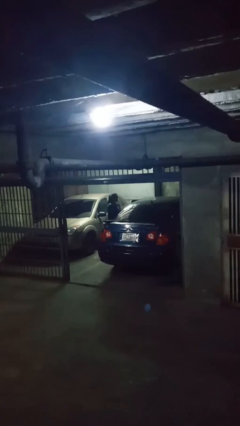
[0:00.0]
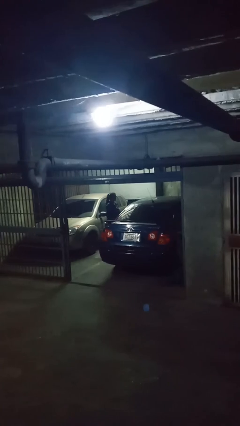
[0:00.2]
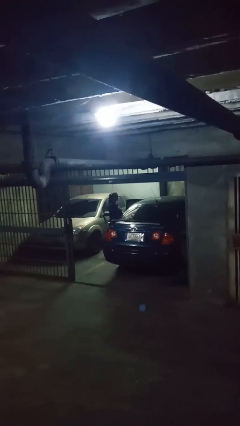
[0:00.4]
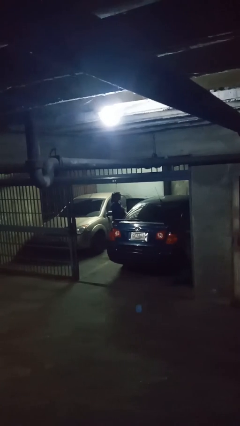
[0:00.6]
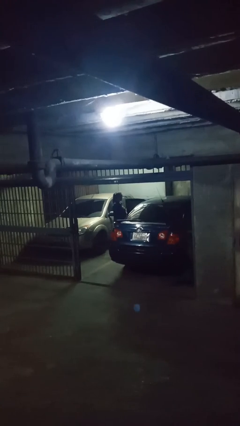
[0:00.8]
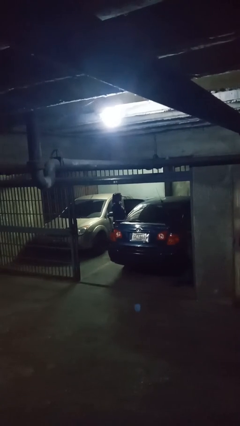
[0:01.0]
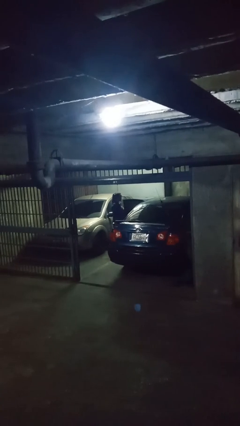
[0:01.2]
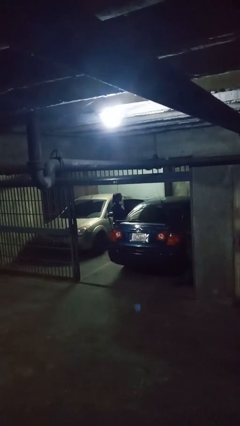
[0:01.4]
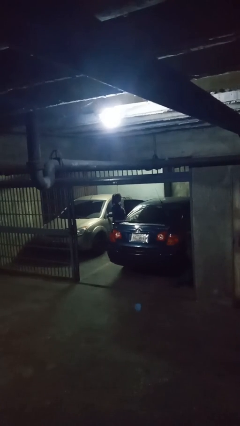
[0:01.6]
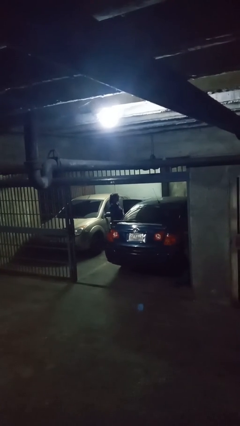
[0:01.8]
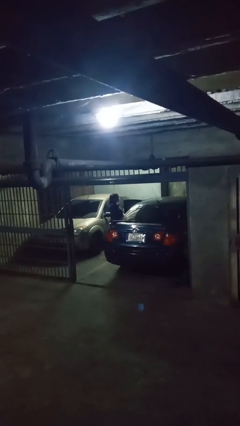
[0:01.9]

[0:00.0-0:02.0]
person opens car door

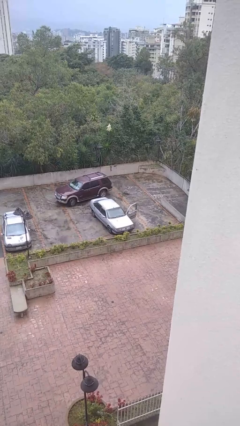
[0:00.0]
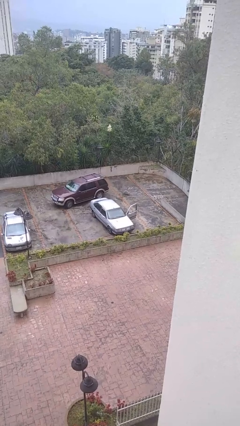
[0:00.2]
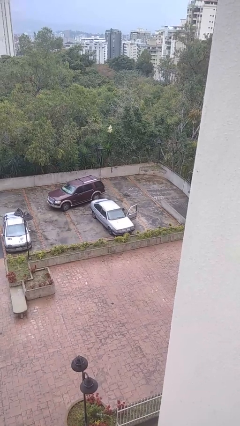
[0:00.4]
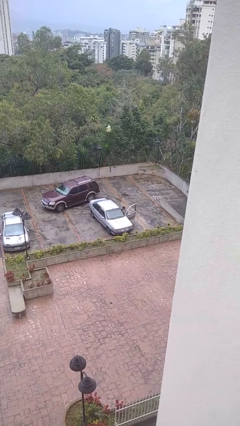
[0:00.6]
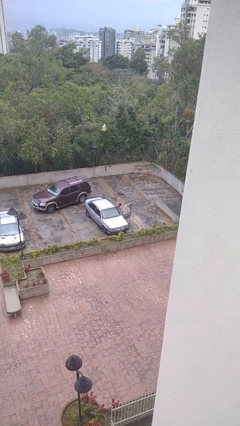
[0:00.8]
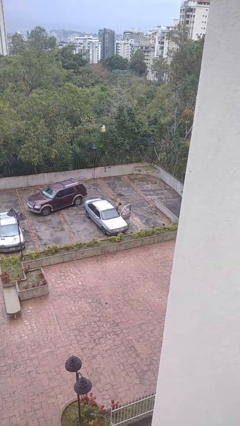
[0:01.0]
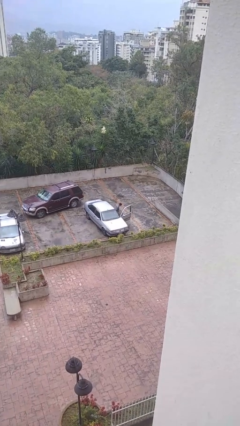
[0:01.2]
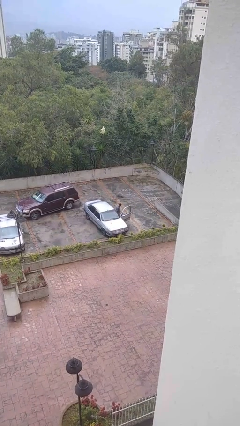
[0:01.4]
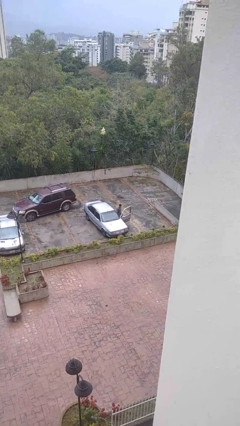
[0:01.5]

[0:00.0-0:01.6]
person exits car

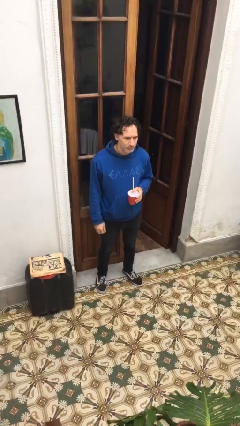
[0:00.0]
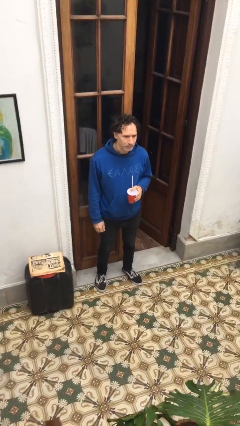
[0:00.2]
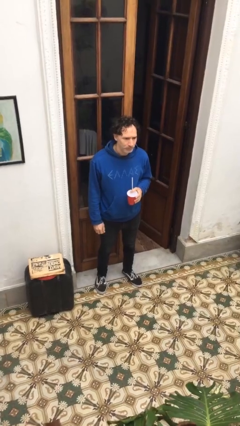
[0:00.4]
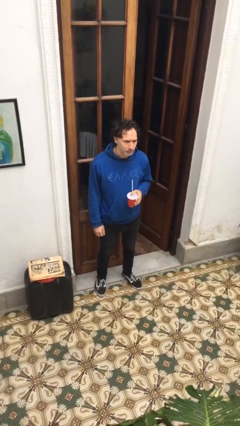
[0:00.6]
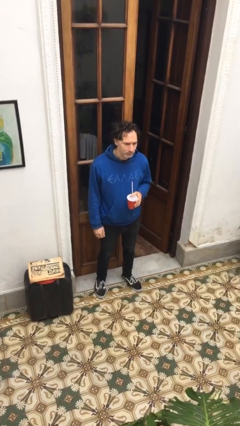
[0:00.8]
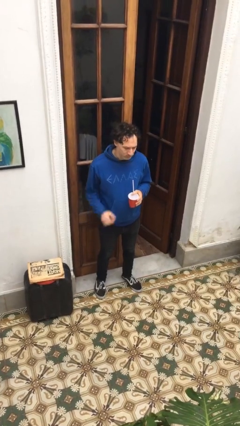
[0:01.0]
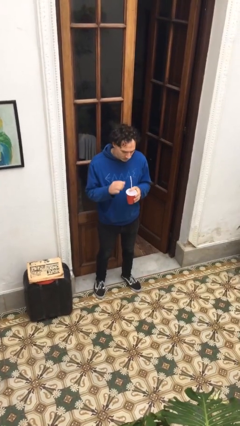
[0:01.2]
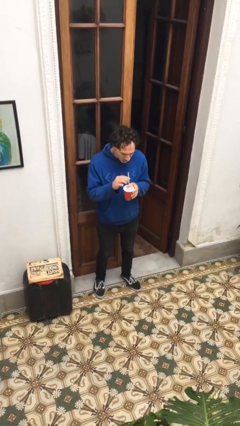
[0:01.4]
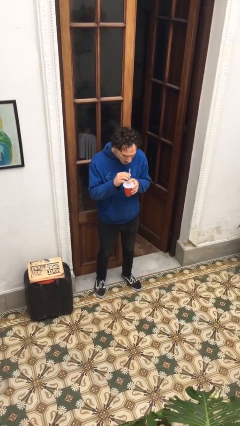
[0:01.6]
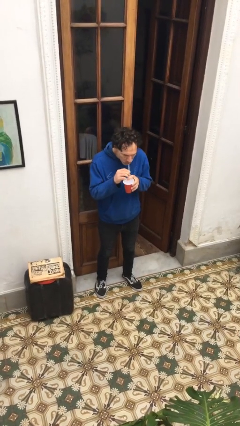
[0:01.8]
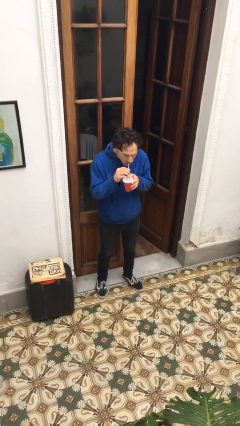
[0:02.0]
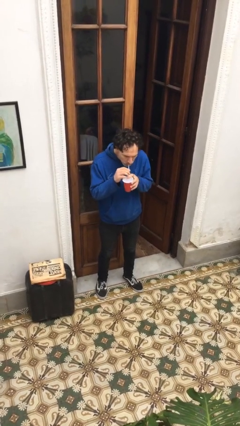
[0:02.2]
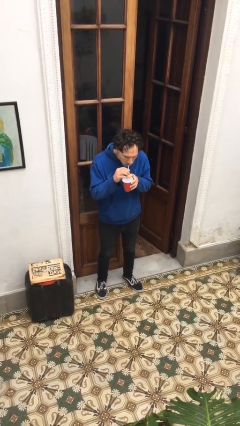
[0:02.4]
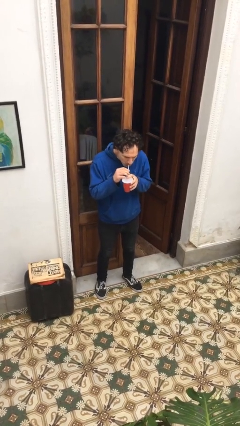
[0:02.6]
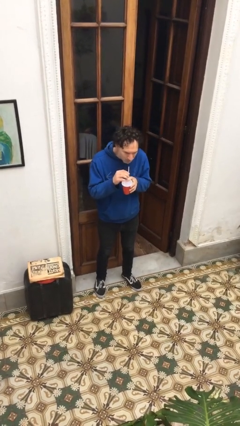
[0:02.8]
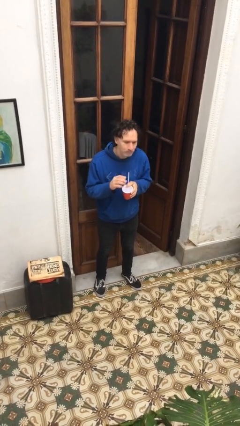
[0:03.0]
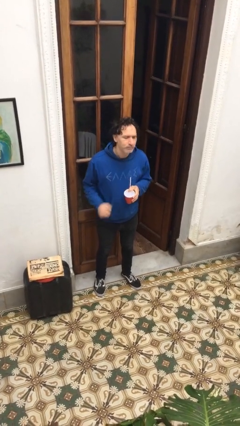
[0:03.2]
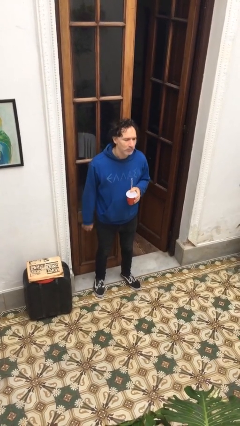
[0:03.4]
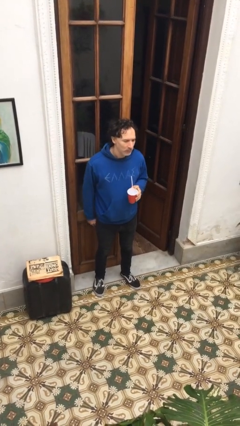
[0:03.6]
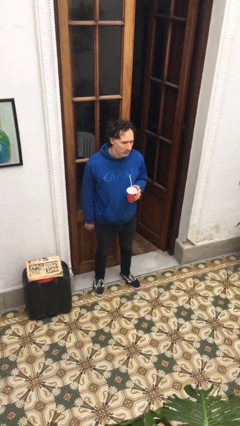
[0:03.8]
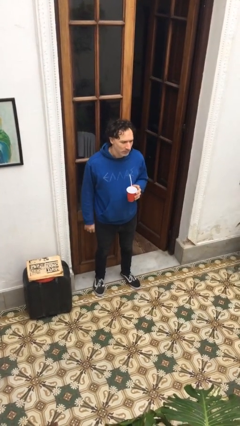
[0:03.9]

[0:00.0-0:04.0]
person drinks from straw

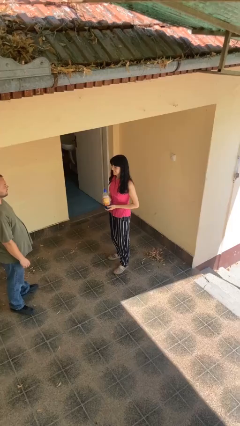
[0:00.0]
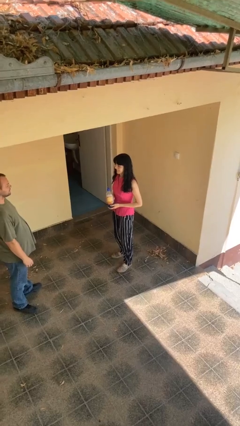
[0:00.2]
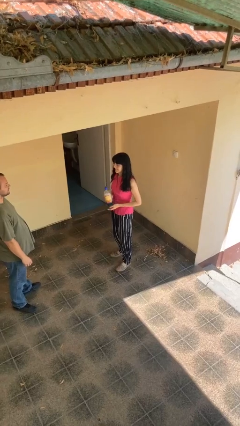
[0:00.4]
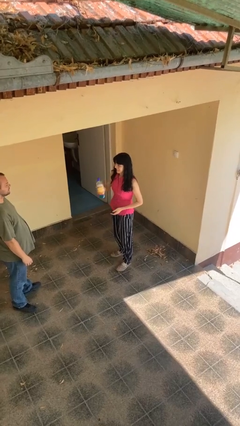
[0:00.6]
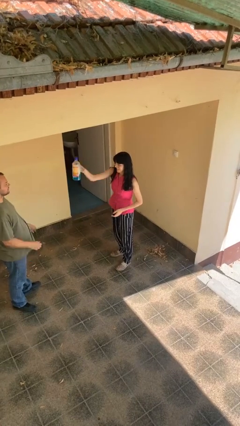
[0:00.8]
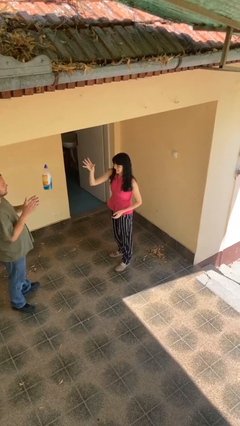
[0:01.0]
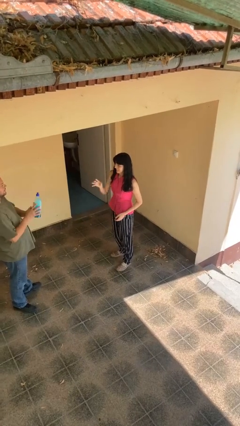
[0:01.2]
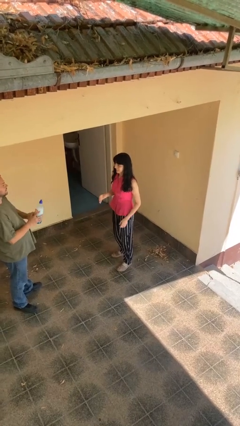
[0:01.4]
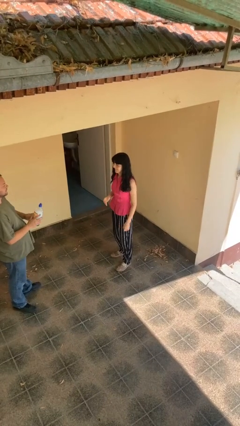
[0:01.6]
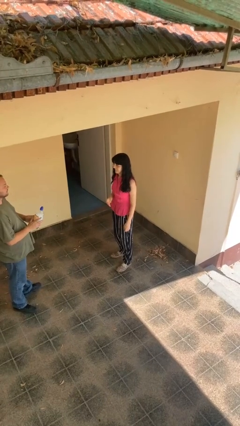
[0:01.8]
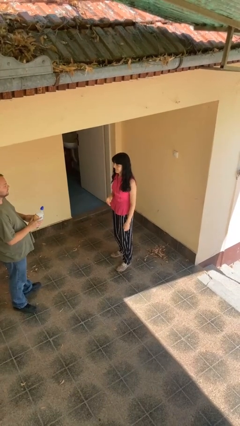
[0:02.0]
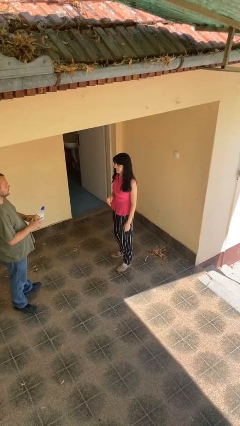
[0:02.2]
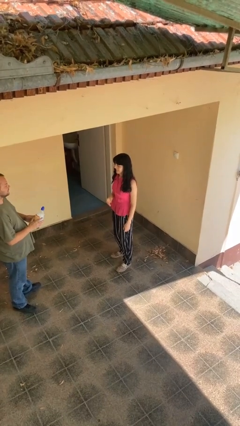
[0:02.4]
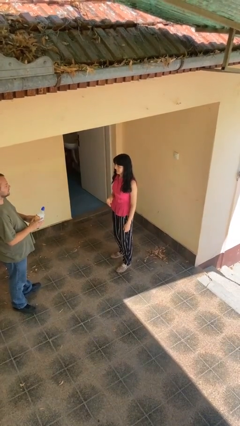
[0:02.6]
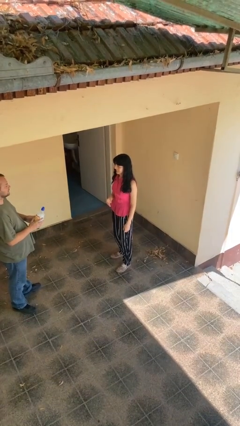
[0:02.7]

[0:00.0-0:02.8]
person throws object to person

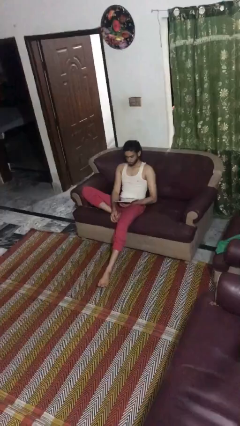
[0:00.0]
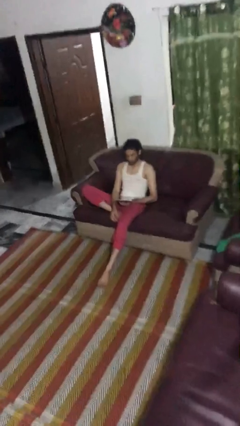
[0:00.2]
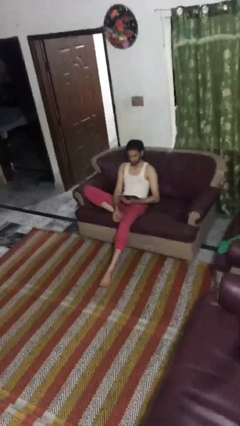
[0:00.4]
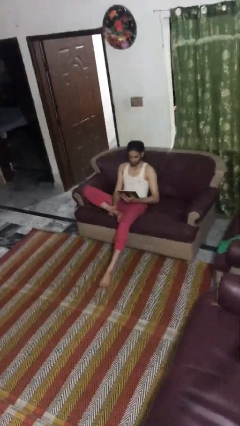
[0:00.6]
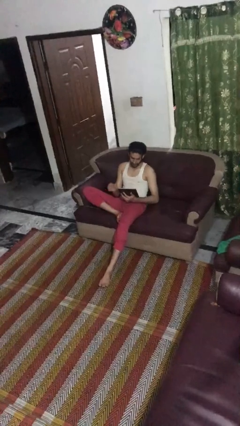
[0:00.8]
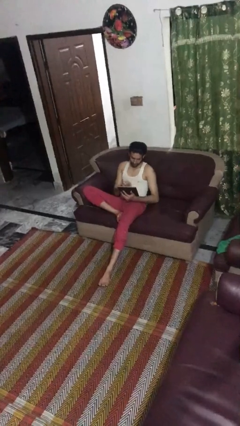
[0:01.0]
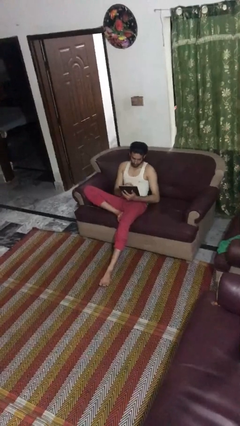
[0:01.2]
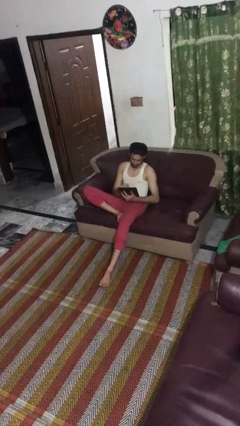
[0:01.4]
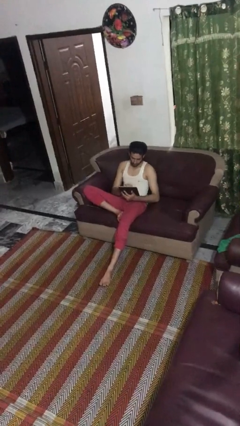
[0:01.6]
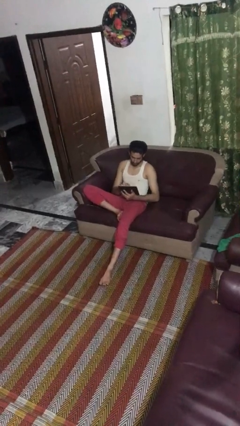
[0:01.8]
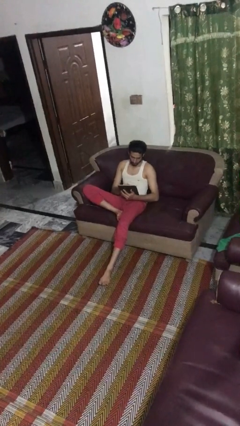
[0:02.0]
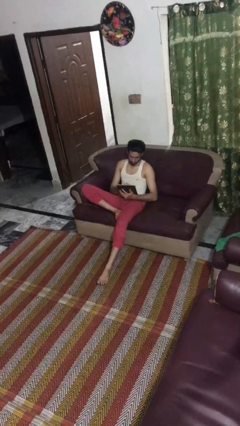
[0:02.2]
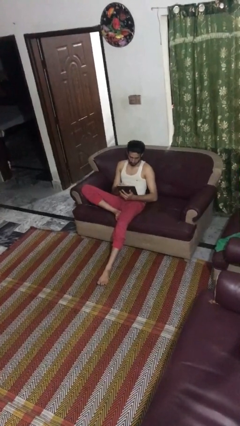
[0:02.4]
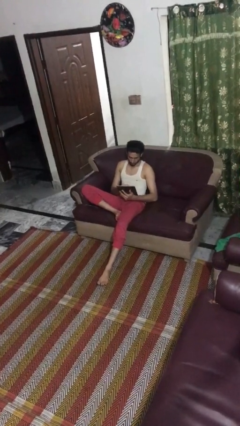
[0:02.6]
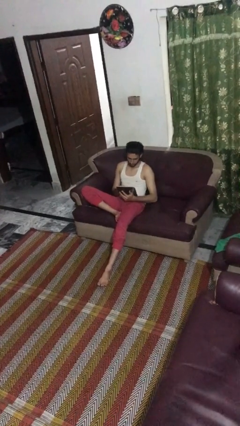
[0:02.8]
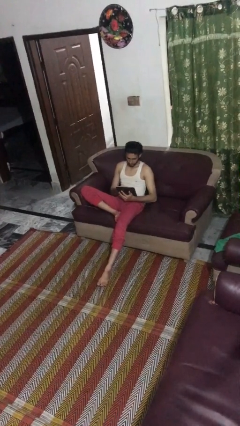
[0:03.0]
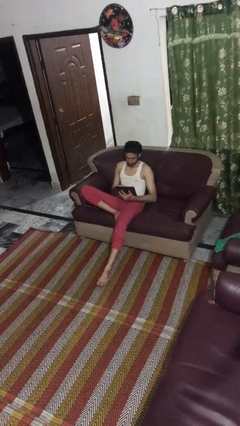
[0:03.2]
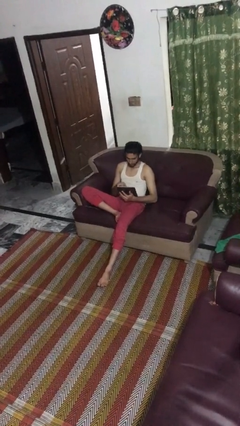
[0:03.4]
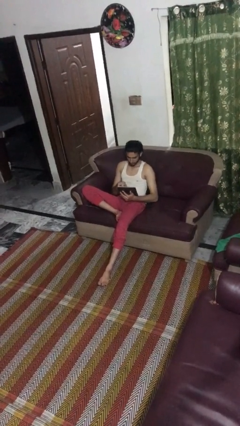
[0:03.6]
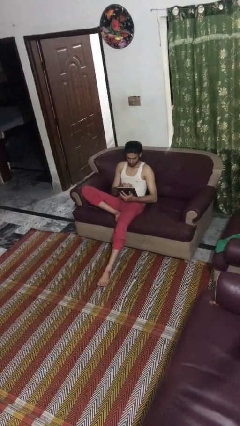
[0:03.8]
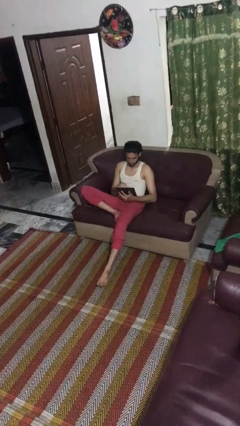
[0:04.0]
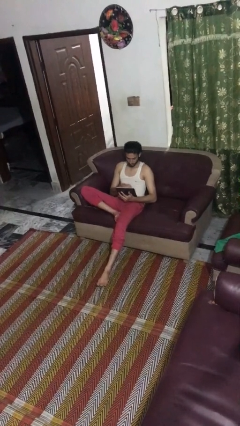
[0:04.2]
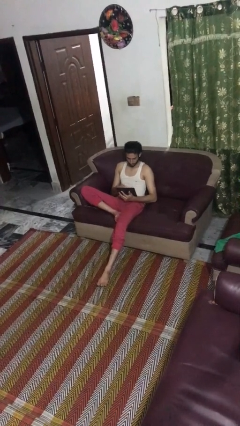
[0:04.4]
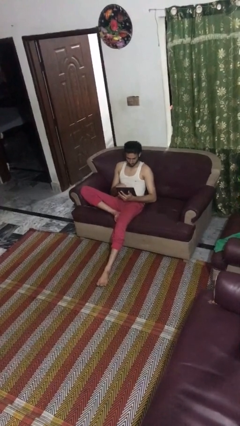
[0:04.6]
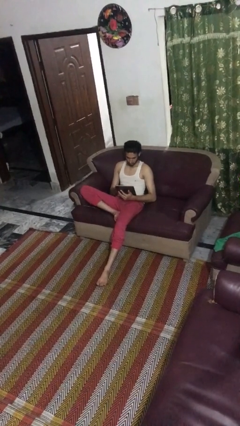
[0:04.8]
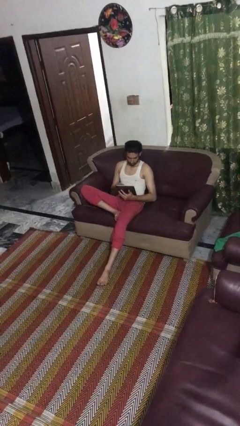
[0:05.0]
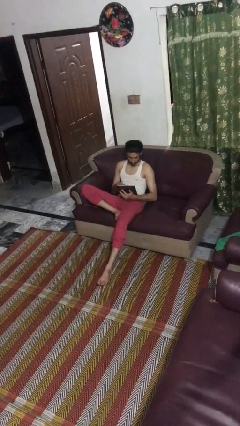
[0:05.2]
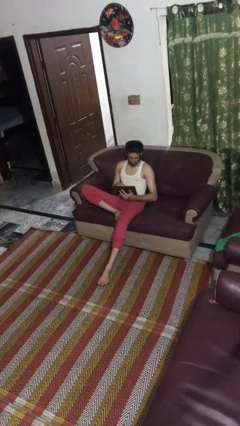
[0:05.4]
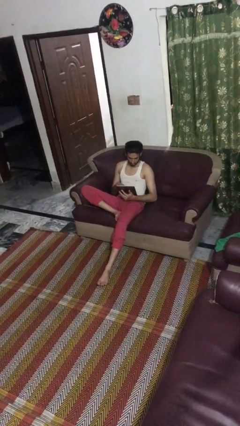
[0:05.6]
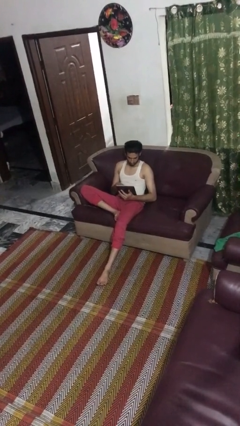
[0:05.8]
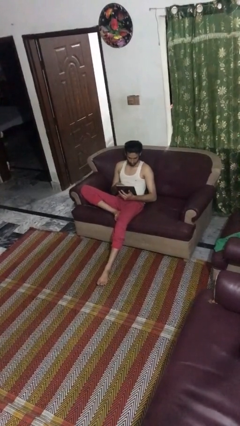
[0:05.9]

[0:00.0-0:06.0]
person interacts with tablet

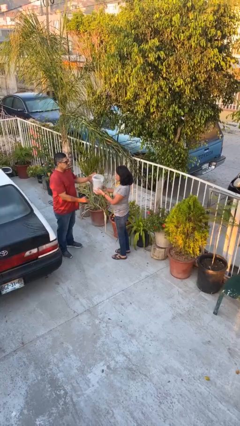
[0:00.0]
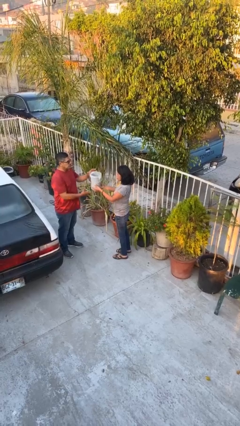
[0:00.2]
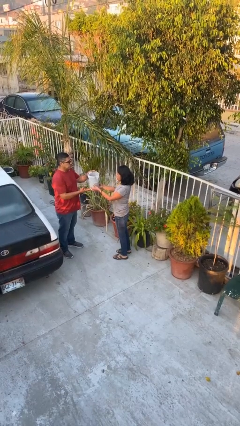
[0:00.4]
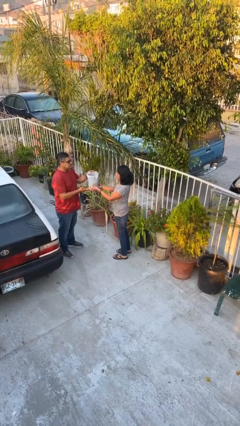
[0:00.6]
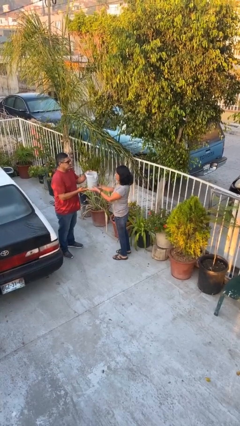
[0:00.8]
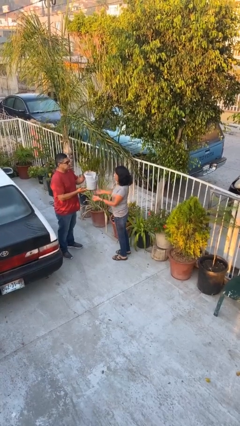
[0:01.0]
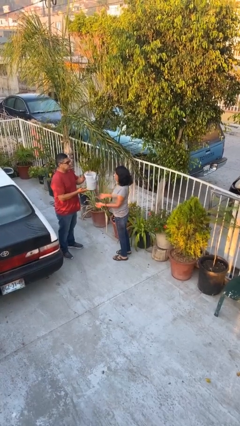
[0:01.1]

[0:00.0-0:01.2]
person transfers object to person
